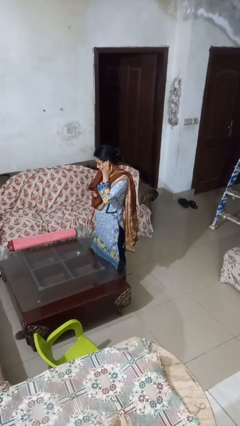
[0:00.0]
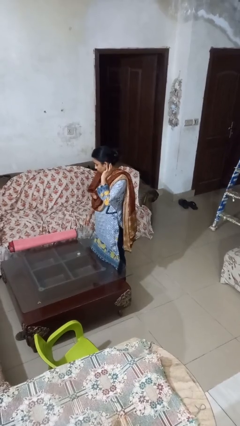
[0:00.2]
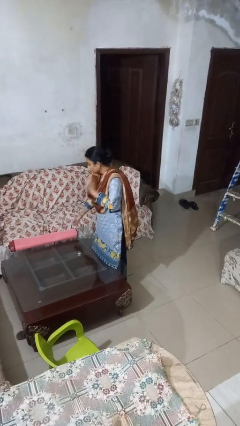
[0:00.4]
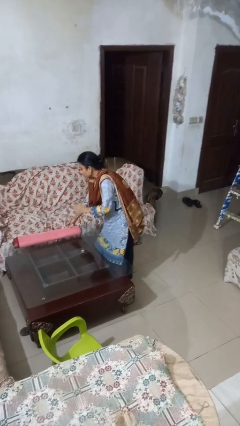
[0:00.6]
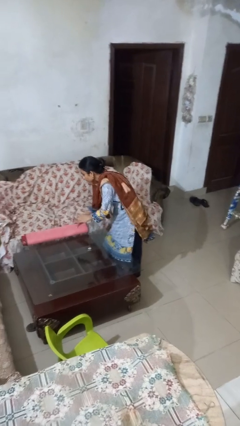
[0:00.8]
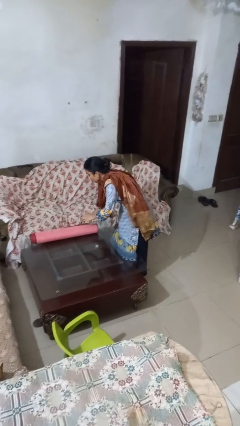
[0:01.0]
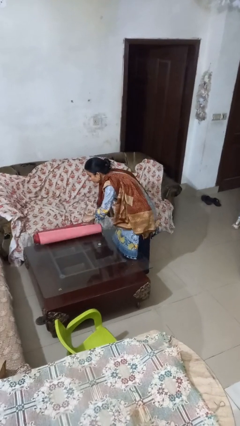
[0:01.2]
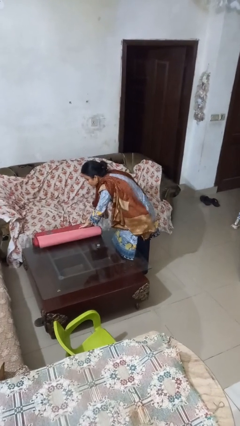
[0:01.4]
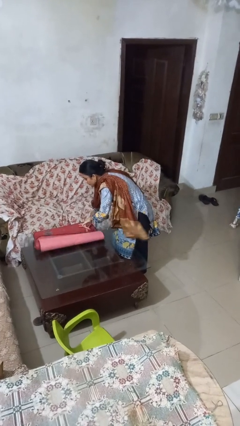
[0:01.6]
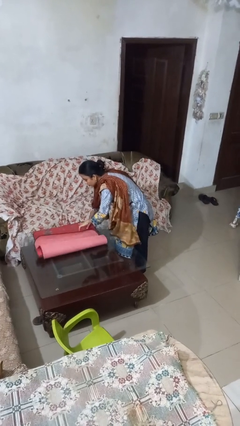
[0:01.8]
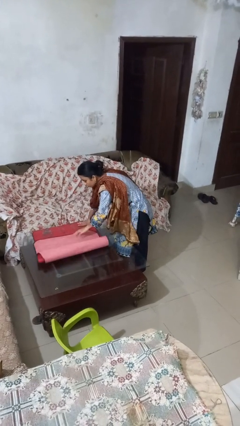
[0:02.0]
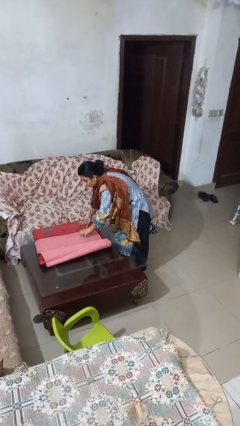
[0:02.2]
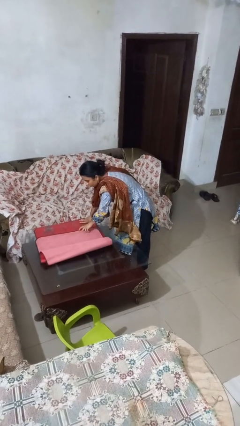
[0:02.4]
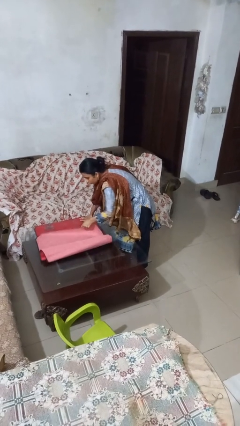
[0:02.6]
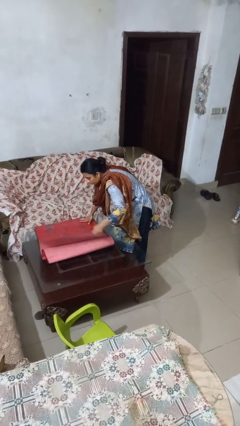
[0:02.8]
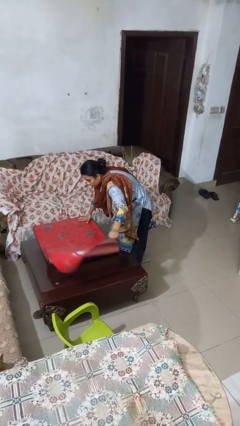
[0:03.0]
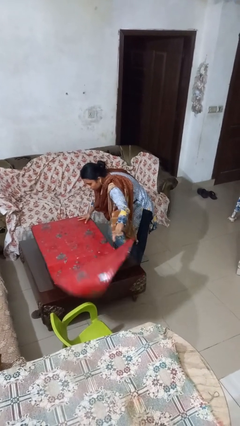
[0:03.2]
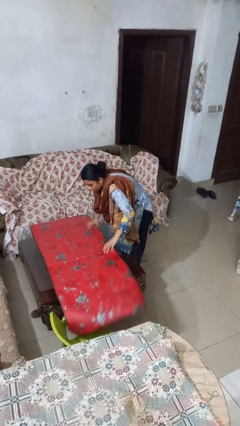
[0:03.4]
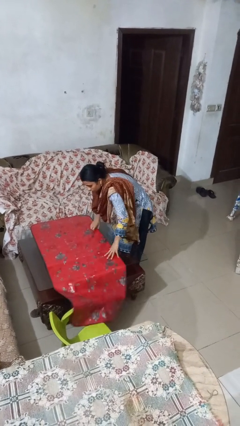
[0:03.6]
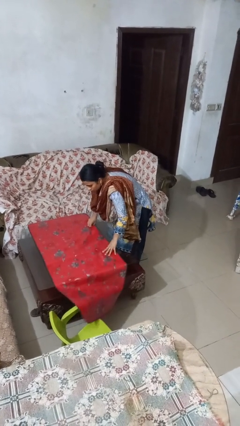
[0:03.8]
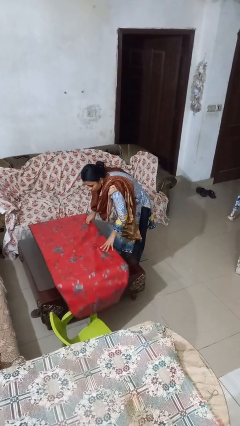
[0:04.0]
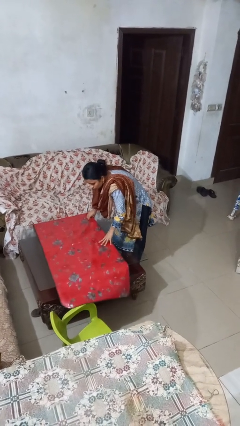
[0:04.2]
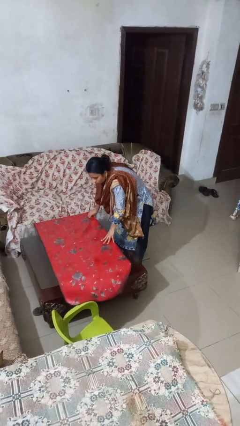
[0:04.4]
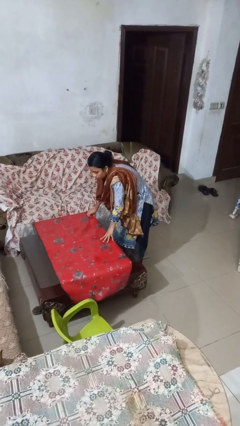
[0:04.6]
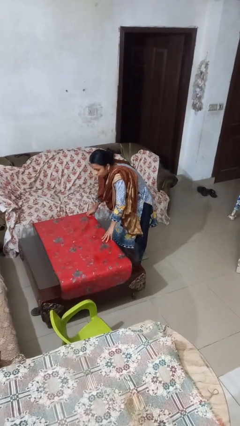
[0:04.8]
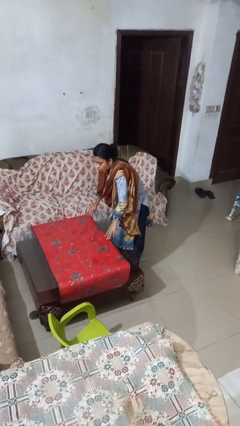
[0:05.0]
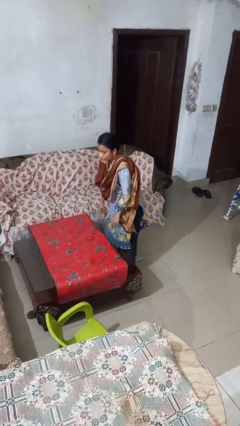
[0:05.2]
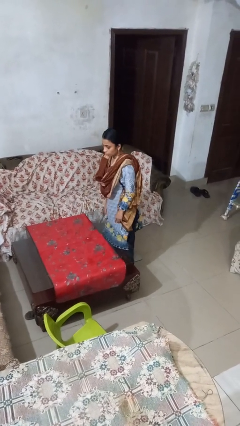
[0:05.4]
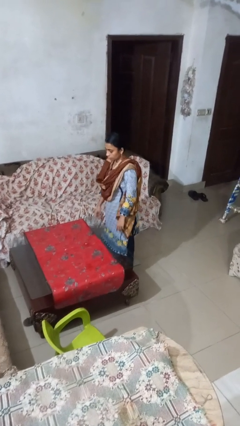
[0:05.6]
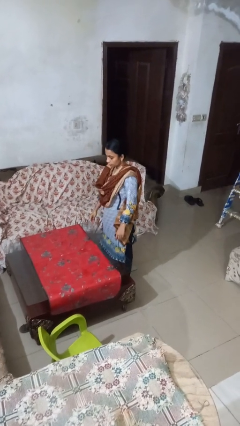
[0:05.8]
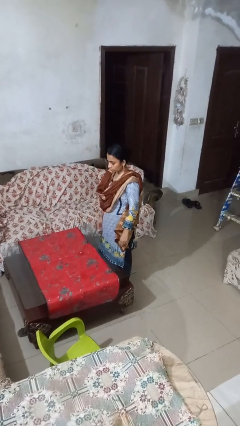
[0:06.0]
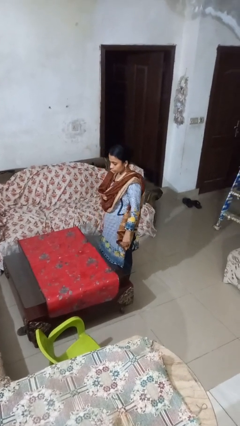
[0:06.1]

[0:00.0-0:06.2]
person spreads tablecloth

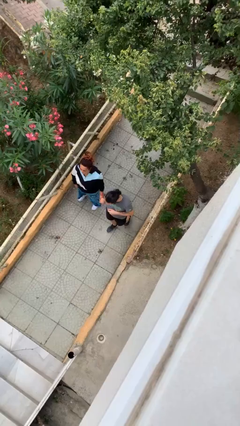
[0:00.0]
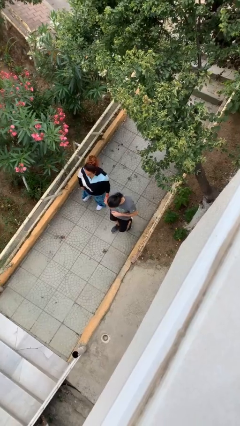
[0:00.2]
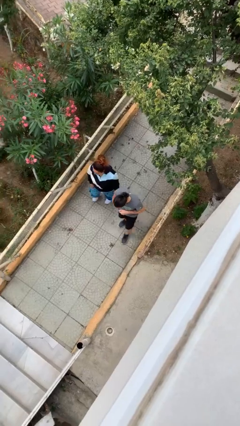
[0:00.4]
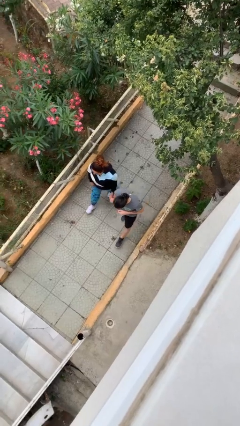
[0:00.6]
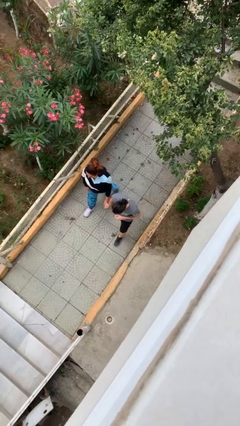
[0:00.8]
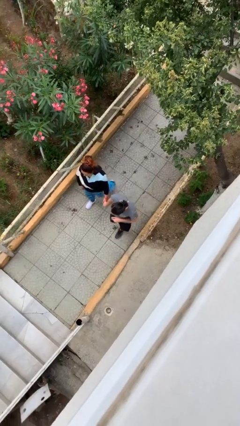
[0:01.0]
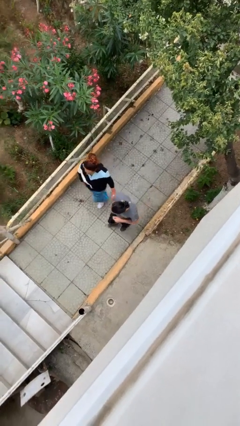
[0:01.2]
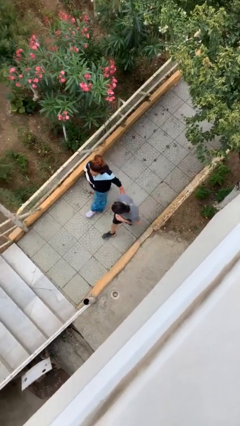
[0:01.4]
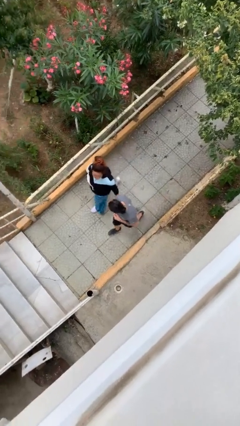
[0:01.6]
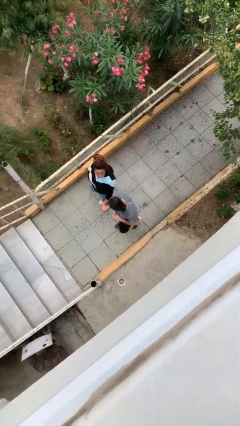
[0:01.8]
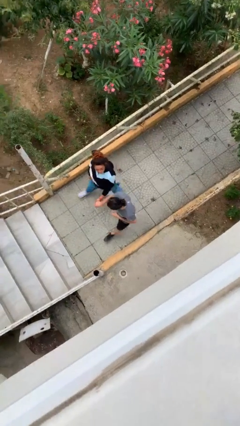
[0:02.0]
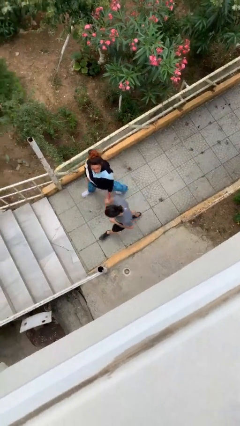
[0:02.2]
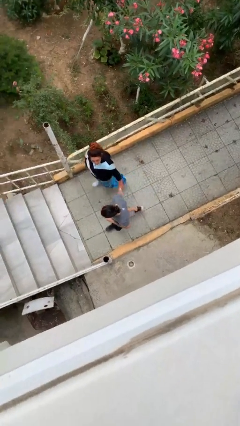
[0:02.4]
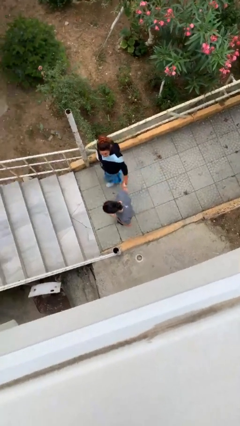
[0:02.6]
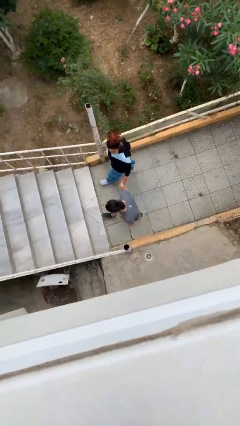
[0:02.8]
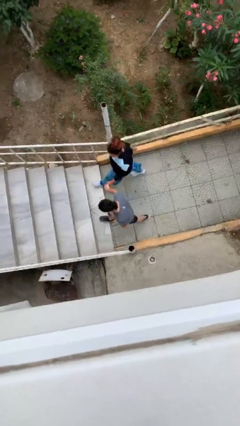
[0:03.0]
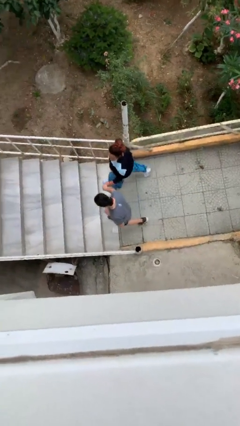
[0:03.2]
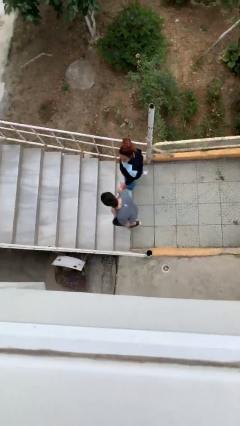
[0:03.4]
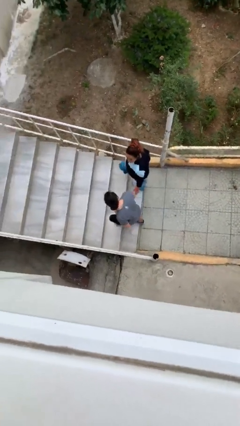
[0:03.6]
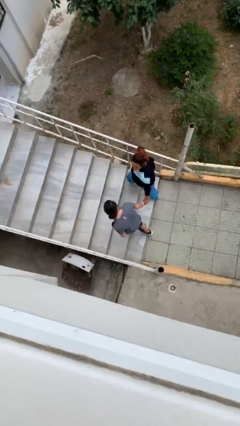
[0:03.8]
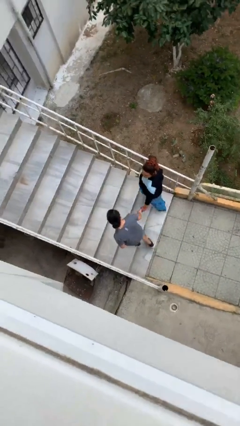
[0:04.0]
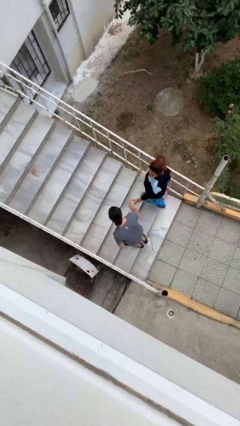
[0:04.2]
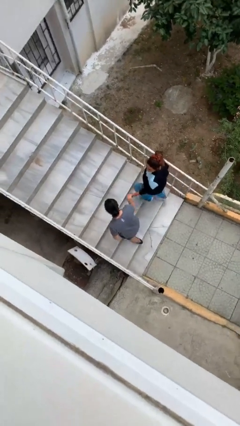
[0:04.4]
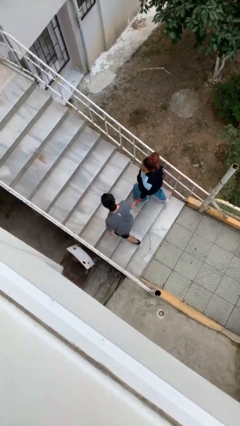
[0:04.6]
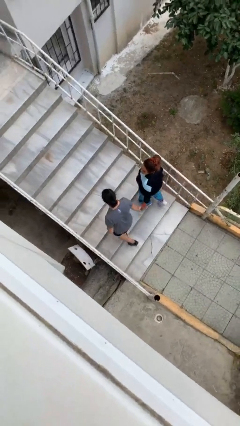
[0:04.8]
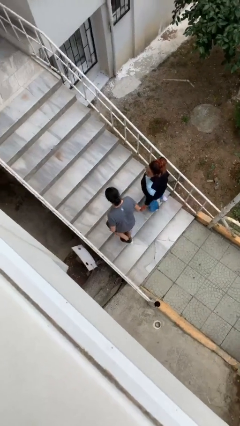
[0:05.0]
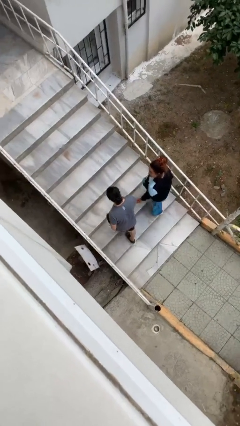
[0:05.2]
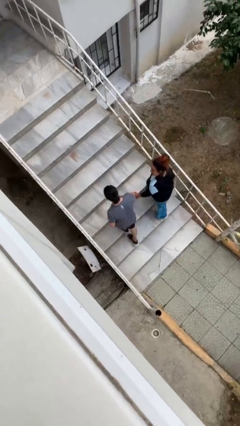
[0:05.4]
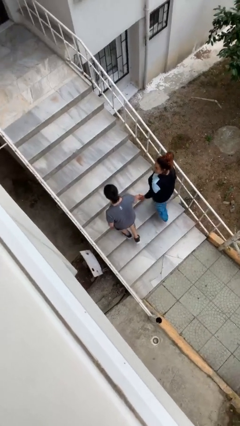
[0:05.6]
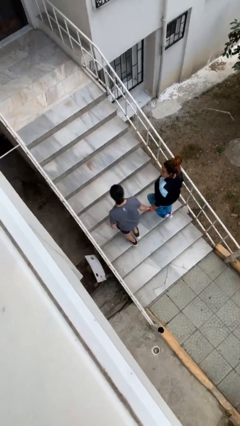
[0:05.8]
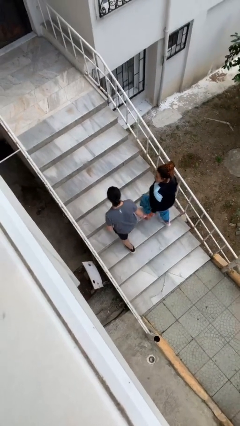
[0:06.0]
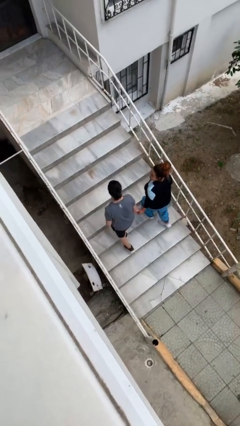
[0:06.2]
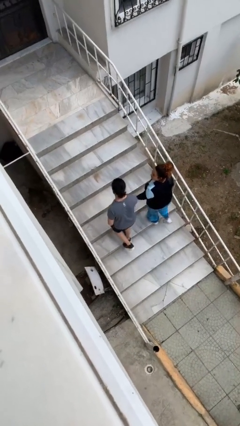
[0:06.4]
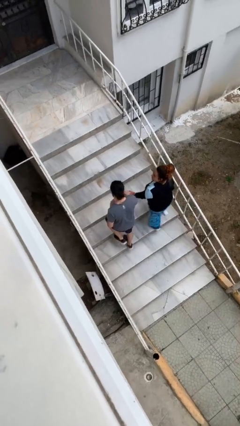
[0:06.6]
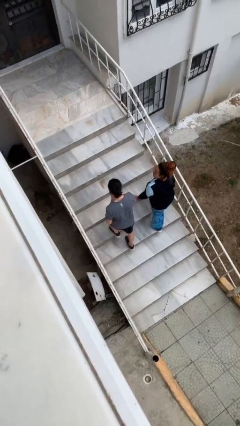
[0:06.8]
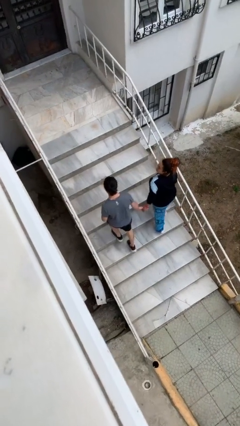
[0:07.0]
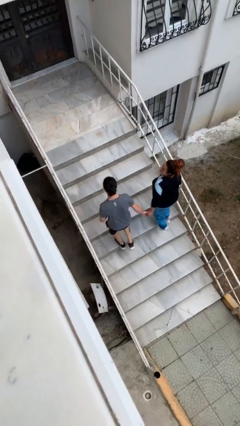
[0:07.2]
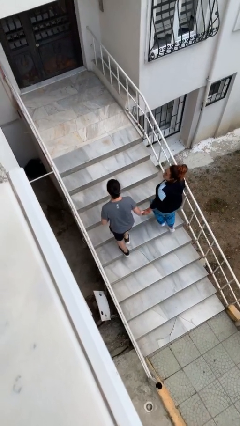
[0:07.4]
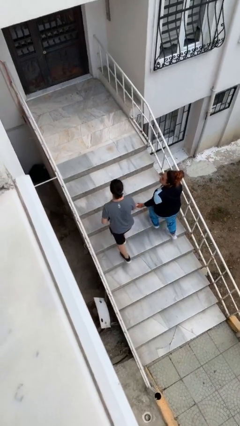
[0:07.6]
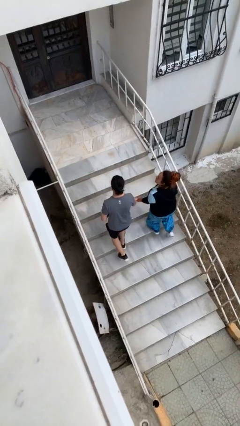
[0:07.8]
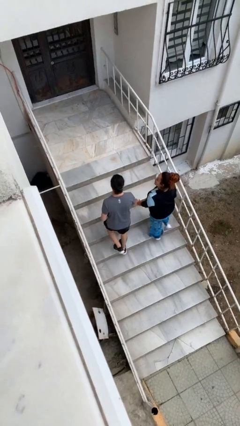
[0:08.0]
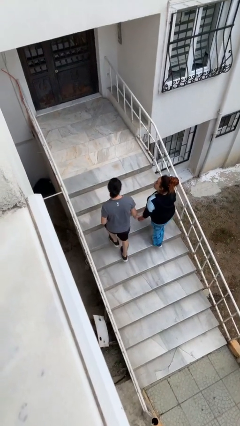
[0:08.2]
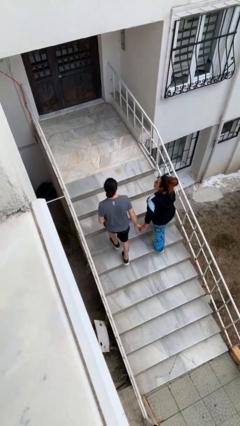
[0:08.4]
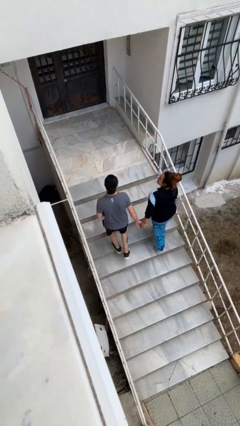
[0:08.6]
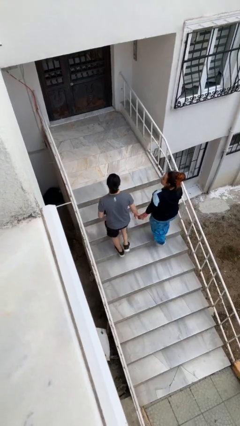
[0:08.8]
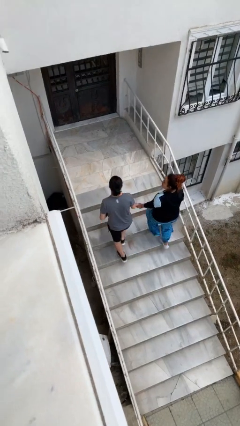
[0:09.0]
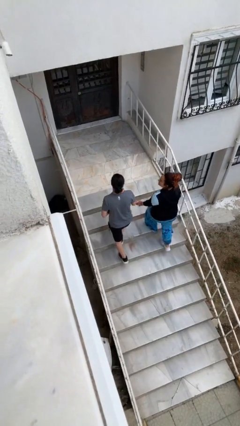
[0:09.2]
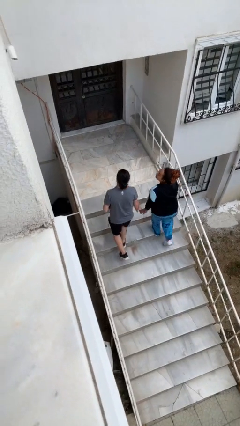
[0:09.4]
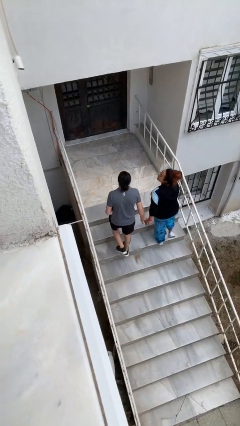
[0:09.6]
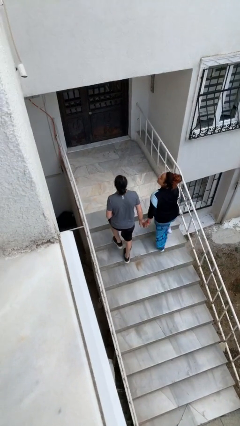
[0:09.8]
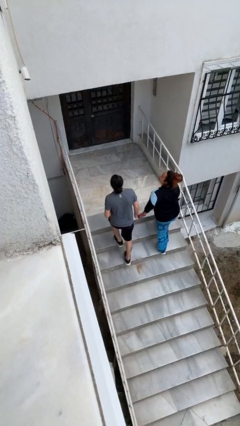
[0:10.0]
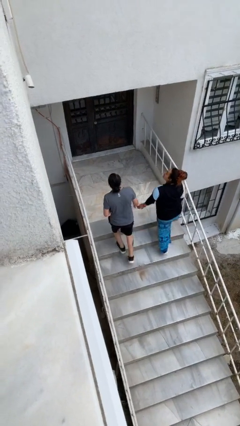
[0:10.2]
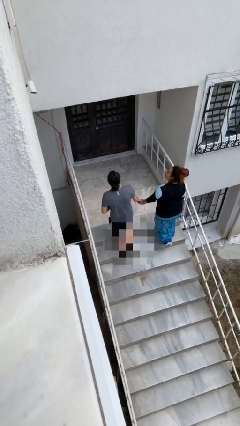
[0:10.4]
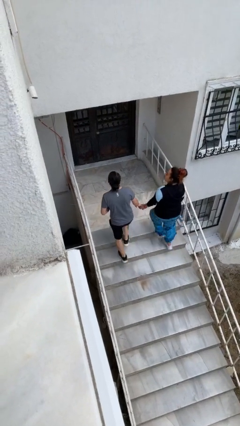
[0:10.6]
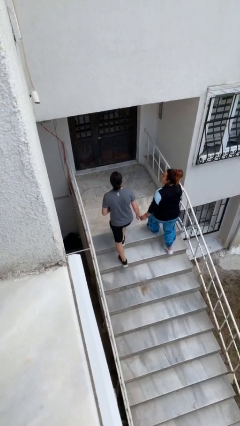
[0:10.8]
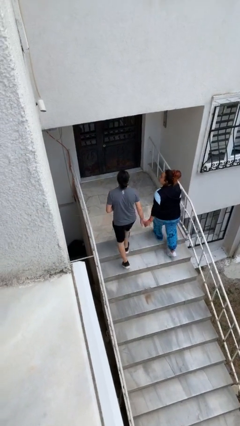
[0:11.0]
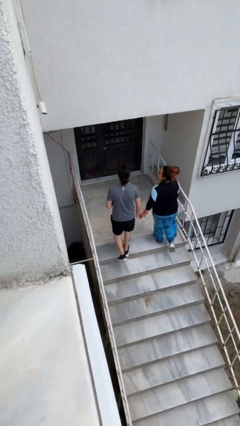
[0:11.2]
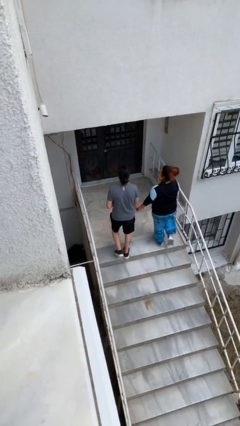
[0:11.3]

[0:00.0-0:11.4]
person holds hand

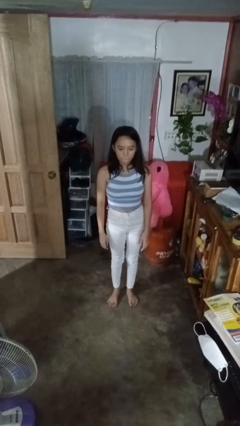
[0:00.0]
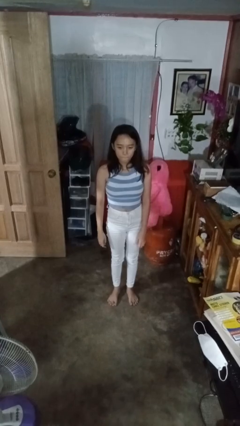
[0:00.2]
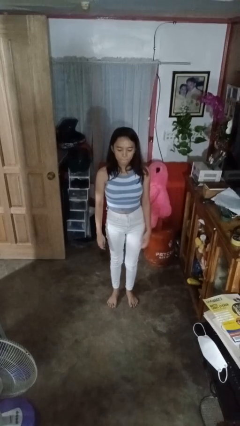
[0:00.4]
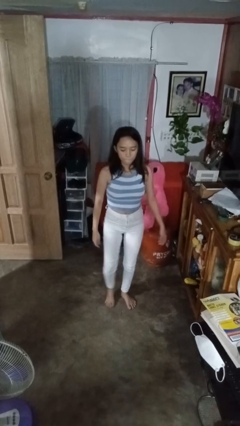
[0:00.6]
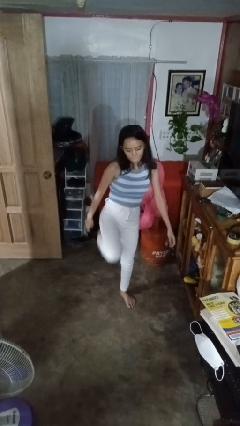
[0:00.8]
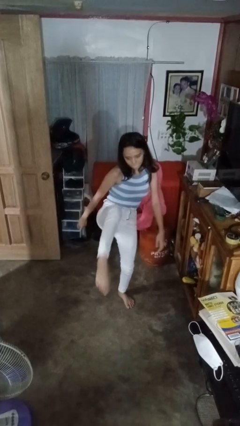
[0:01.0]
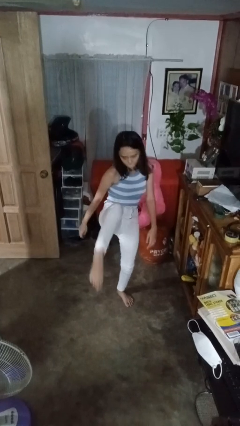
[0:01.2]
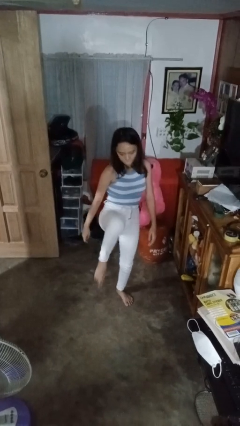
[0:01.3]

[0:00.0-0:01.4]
person karate kicks
